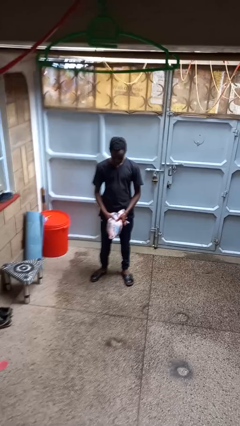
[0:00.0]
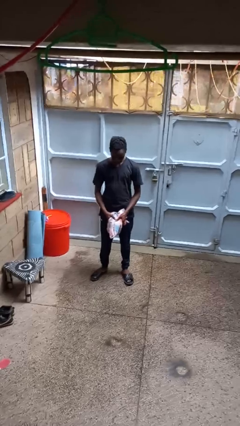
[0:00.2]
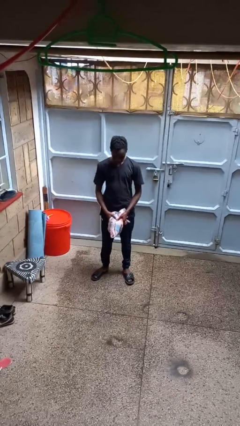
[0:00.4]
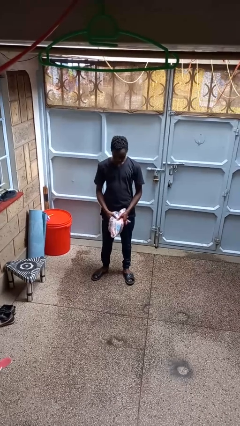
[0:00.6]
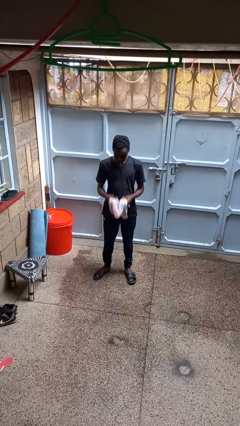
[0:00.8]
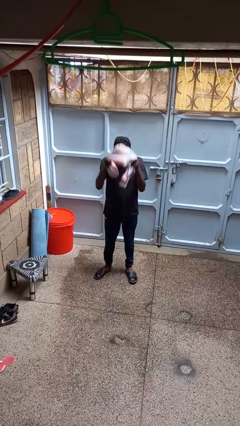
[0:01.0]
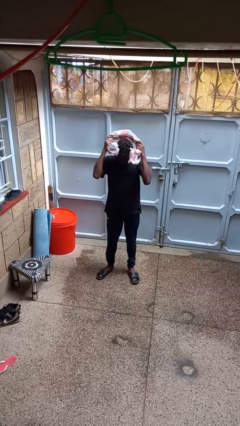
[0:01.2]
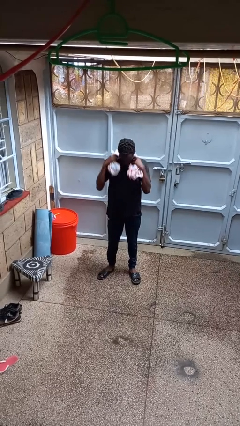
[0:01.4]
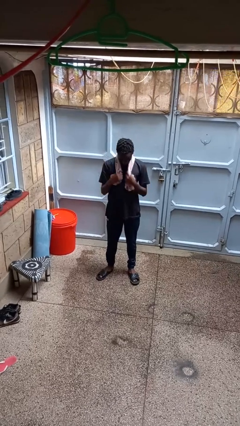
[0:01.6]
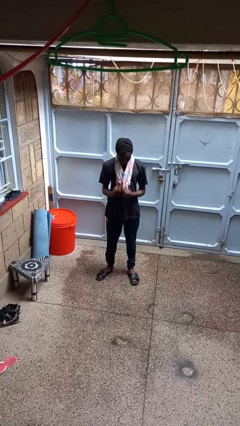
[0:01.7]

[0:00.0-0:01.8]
person puts on scarf

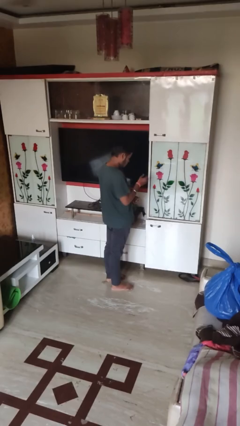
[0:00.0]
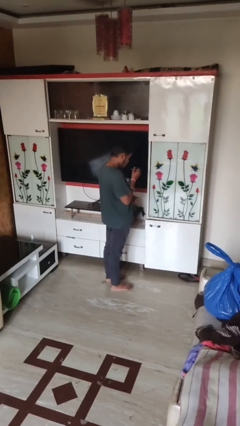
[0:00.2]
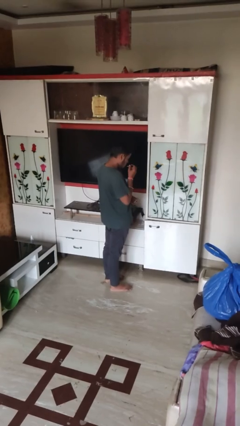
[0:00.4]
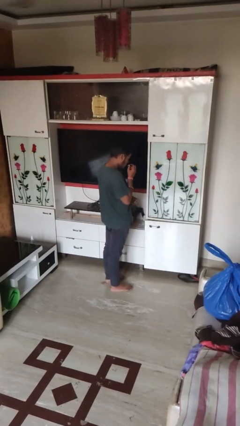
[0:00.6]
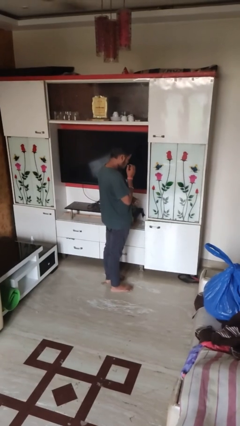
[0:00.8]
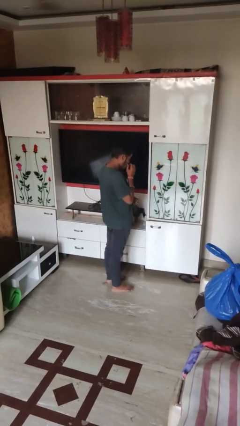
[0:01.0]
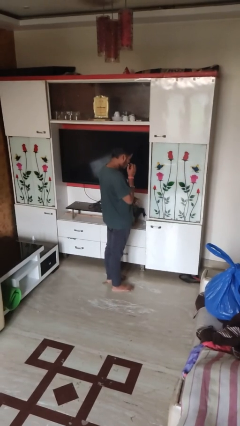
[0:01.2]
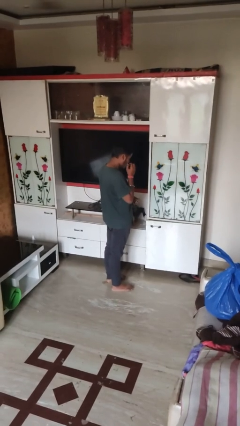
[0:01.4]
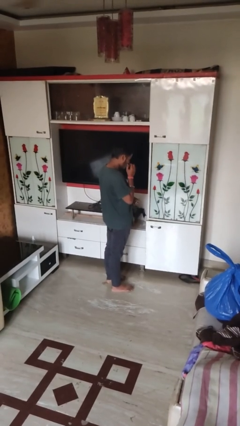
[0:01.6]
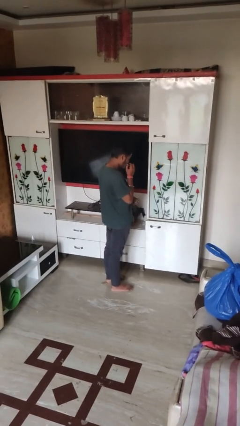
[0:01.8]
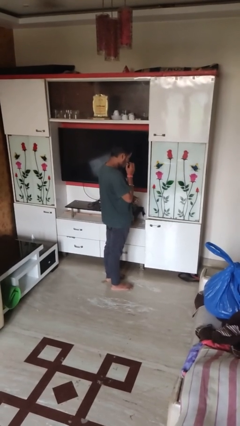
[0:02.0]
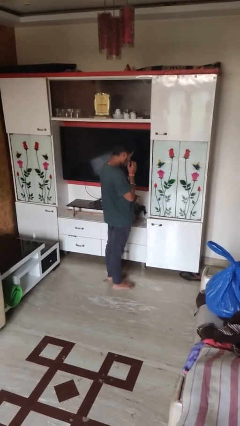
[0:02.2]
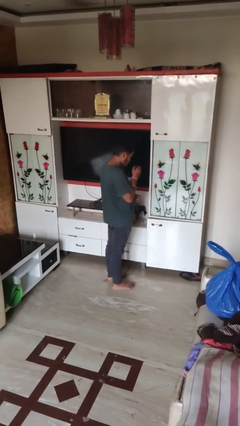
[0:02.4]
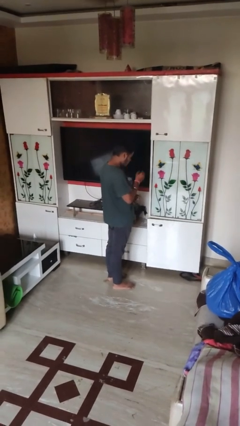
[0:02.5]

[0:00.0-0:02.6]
person applies lip makeup

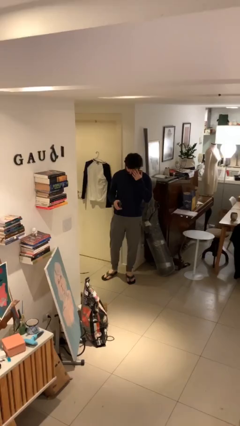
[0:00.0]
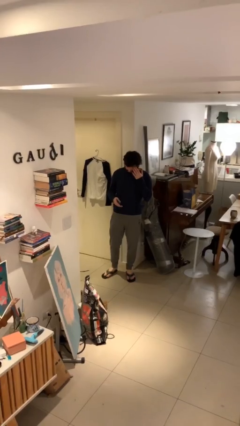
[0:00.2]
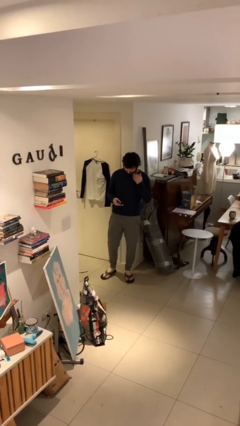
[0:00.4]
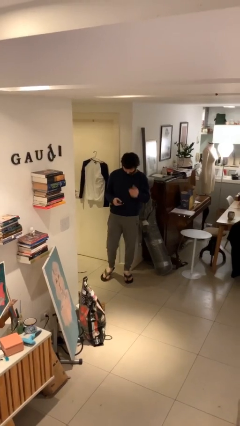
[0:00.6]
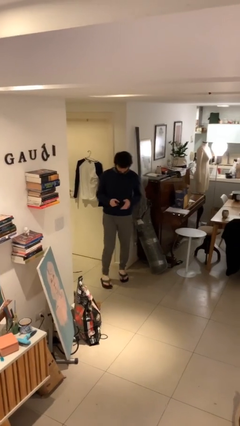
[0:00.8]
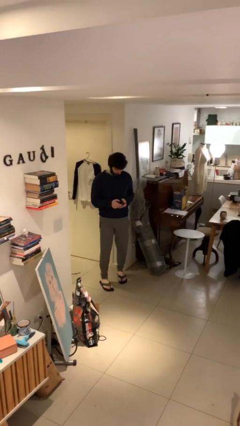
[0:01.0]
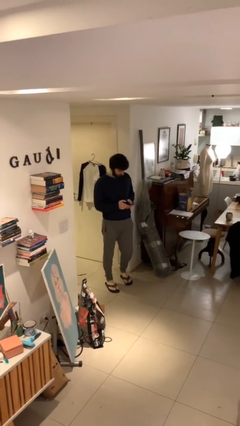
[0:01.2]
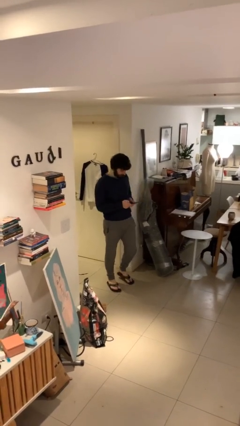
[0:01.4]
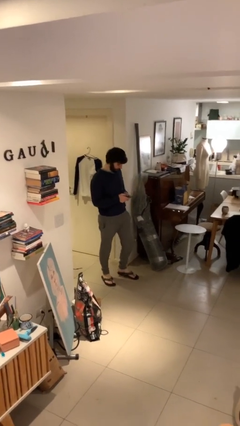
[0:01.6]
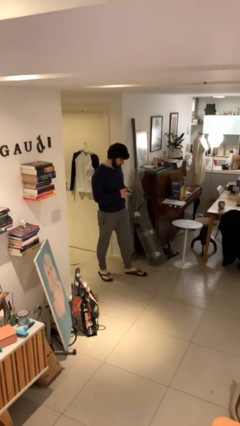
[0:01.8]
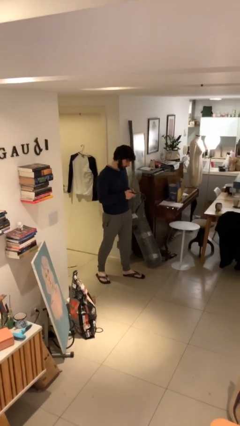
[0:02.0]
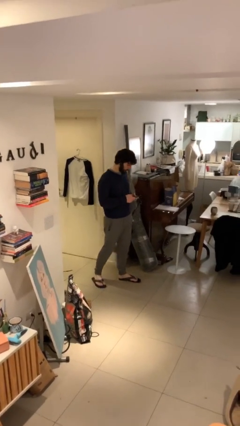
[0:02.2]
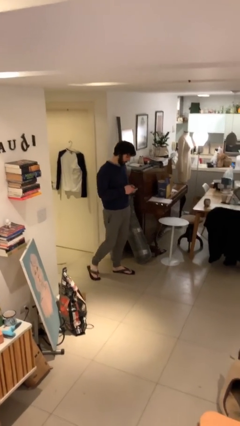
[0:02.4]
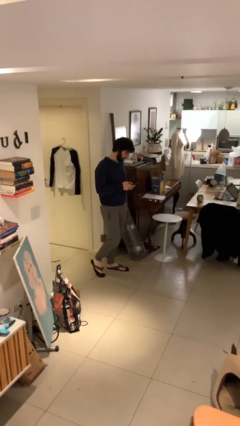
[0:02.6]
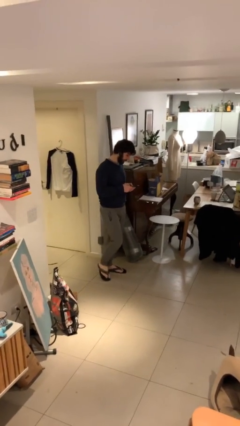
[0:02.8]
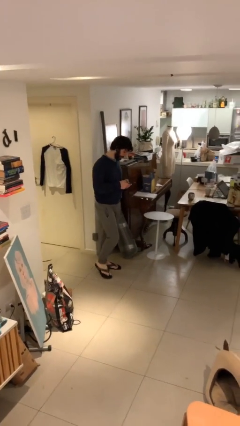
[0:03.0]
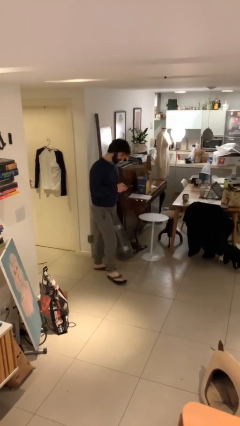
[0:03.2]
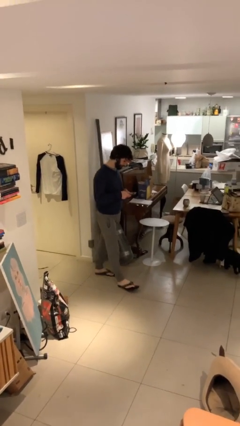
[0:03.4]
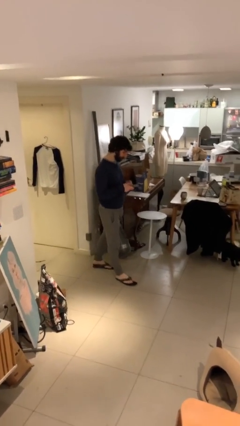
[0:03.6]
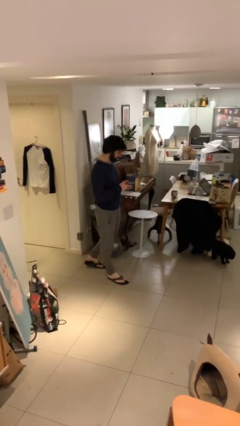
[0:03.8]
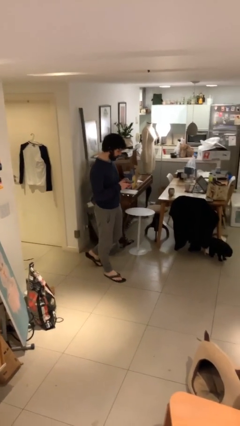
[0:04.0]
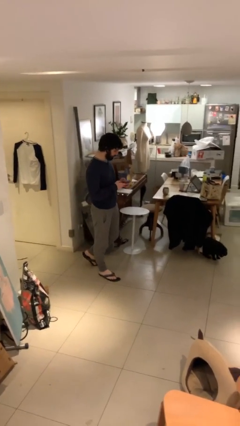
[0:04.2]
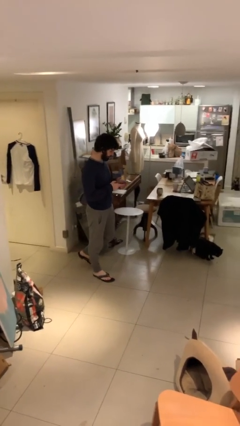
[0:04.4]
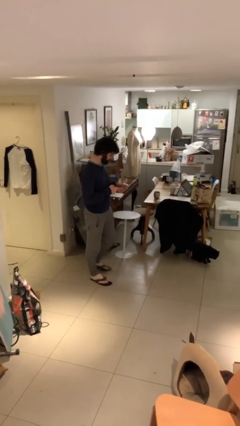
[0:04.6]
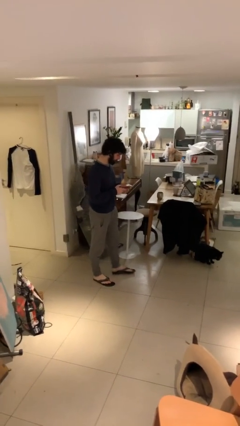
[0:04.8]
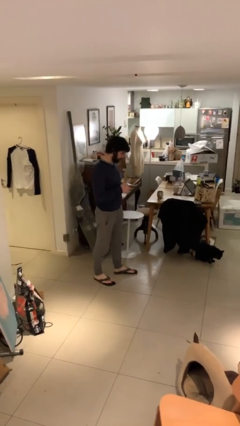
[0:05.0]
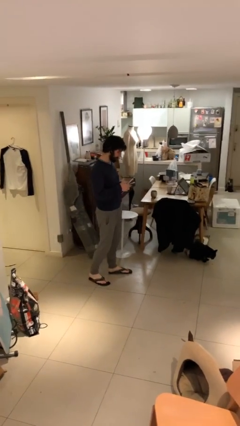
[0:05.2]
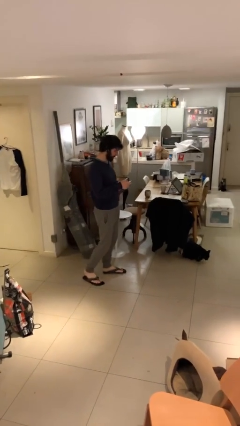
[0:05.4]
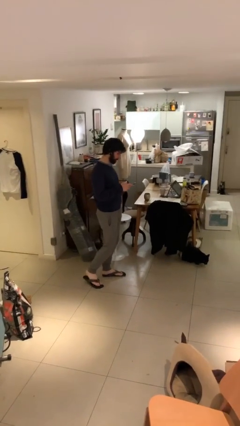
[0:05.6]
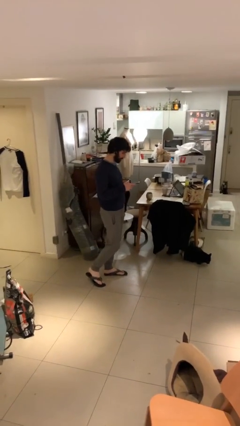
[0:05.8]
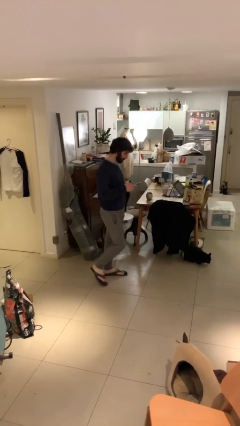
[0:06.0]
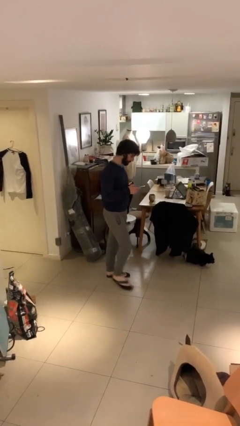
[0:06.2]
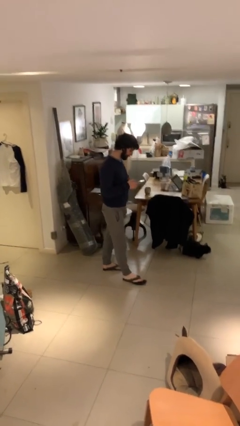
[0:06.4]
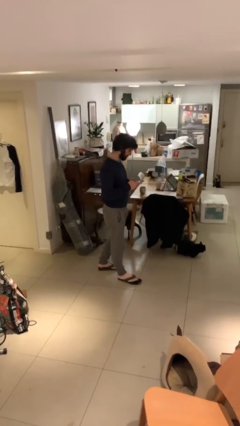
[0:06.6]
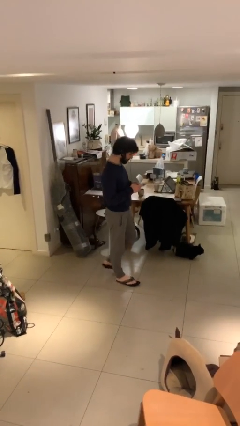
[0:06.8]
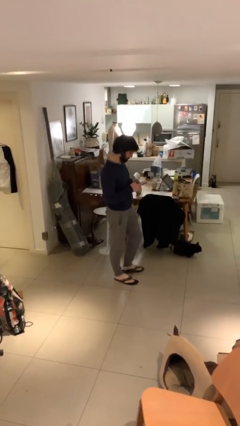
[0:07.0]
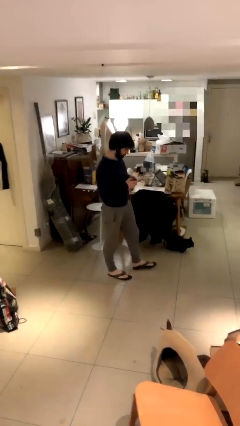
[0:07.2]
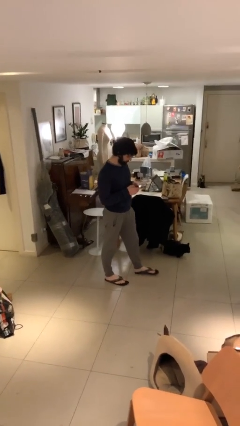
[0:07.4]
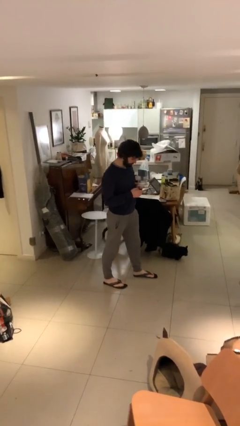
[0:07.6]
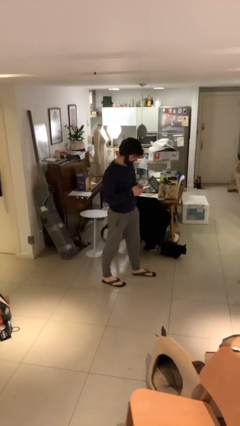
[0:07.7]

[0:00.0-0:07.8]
person texts on phone

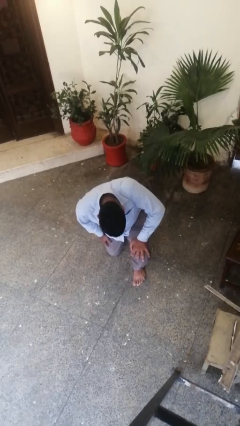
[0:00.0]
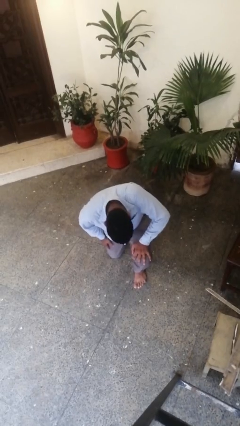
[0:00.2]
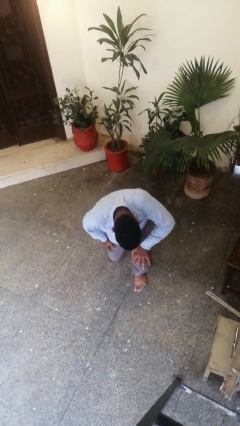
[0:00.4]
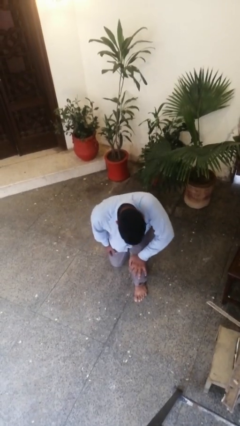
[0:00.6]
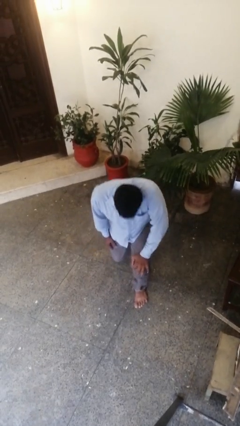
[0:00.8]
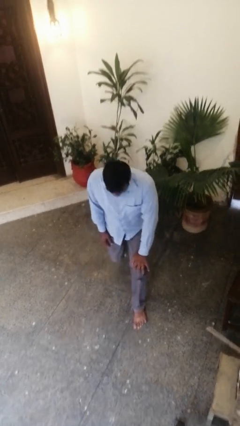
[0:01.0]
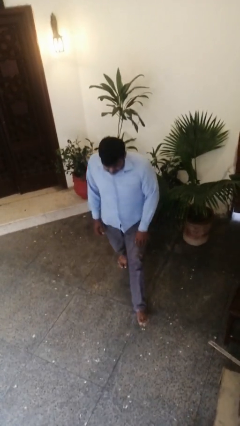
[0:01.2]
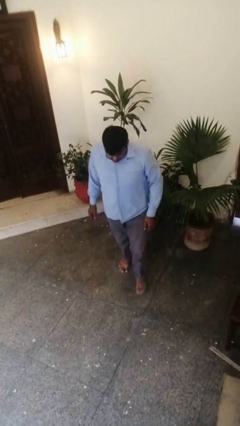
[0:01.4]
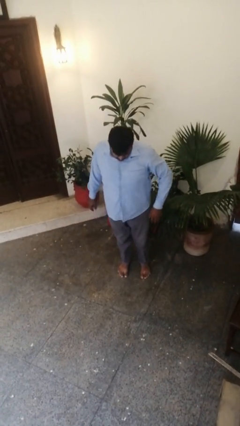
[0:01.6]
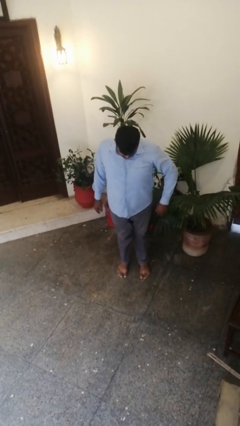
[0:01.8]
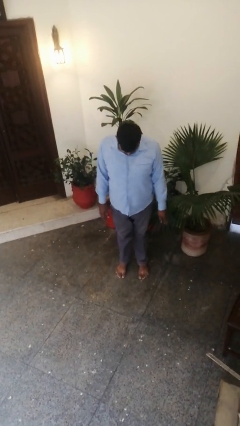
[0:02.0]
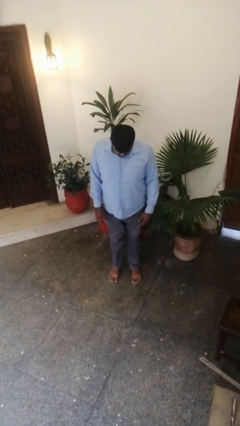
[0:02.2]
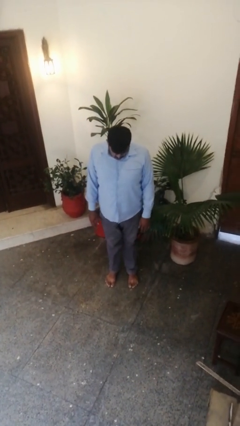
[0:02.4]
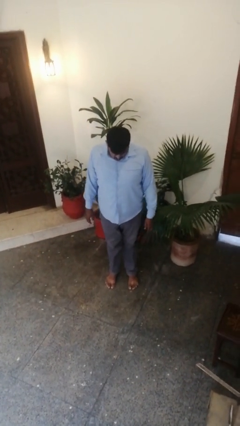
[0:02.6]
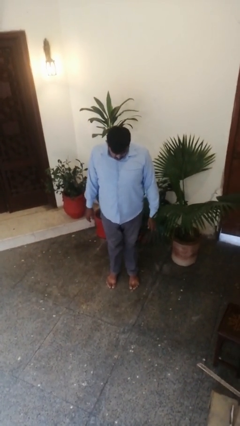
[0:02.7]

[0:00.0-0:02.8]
person stands up from floor

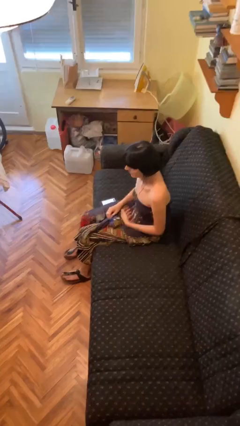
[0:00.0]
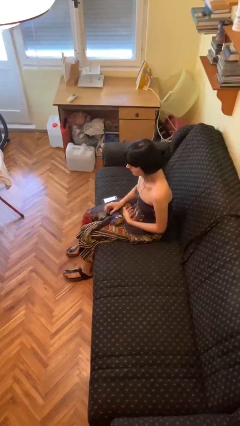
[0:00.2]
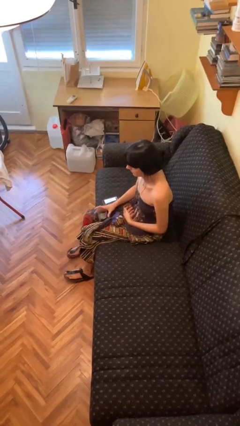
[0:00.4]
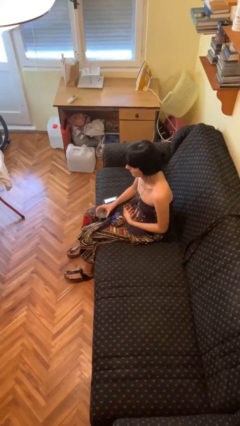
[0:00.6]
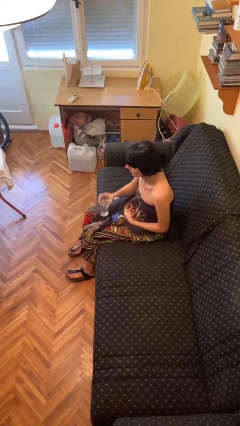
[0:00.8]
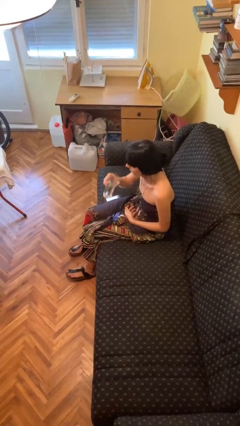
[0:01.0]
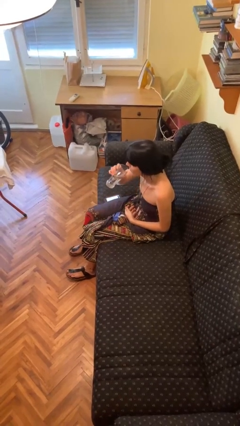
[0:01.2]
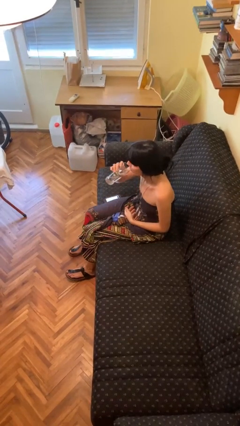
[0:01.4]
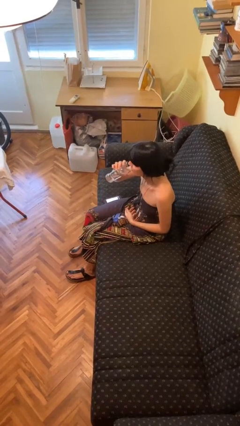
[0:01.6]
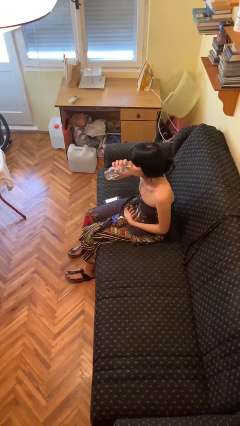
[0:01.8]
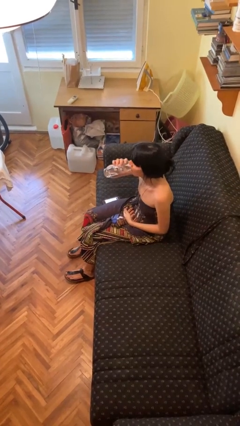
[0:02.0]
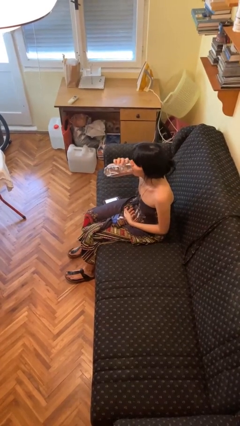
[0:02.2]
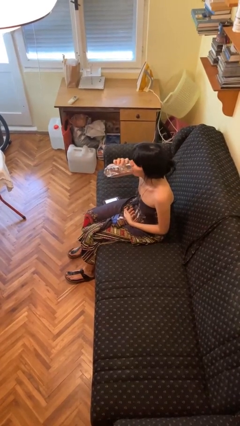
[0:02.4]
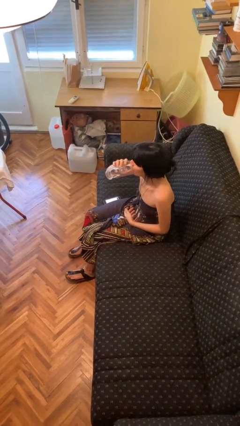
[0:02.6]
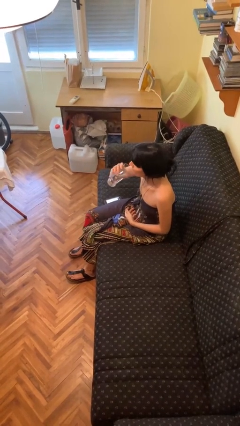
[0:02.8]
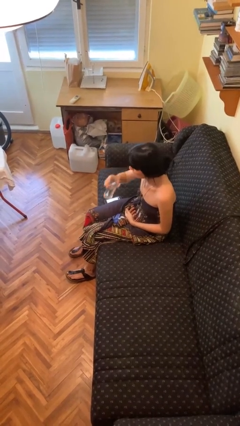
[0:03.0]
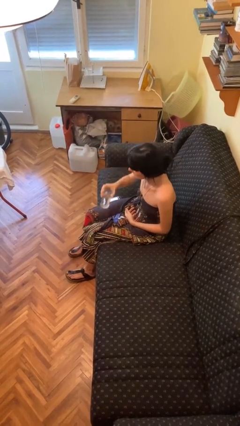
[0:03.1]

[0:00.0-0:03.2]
person drinks from cup
